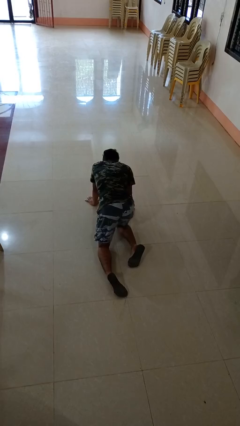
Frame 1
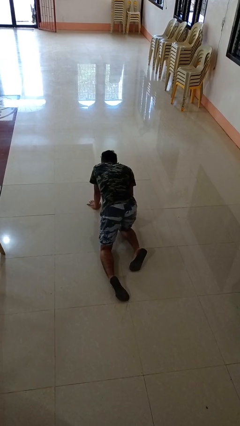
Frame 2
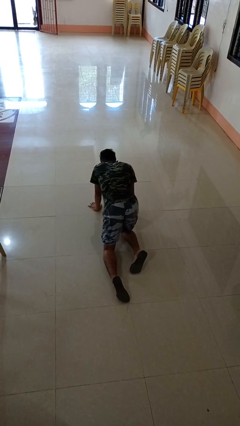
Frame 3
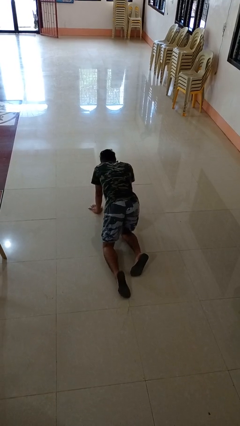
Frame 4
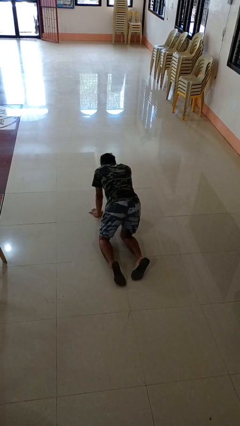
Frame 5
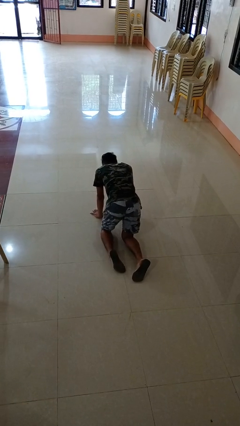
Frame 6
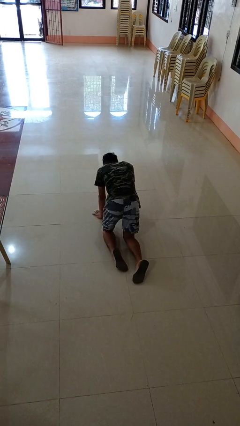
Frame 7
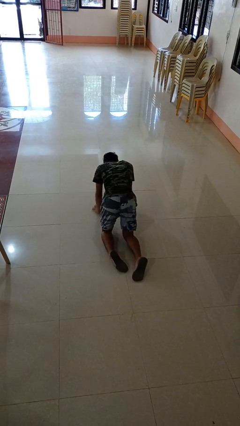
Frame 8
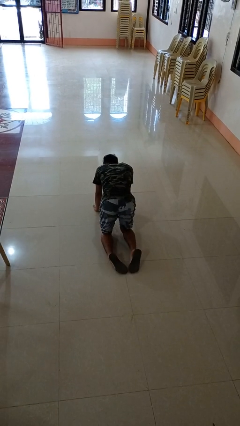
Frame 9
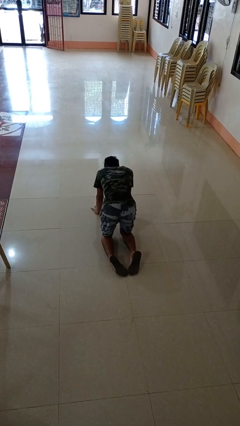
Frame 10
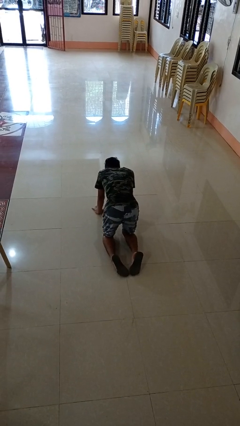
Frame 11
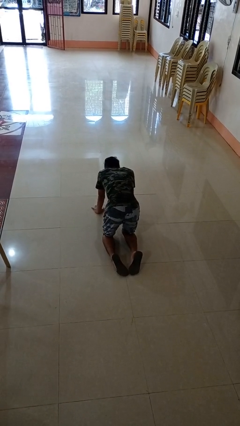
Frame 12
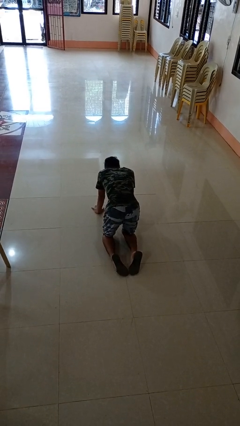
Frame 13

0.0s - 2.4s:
person crawls

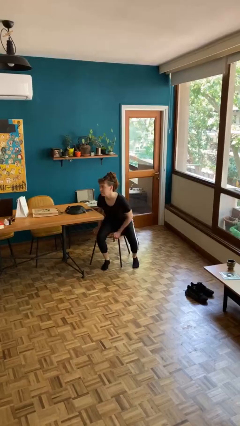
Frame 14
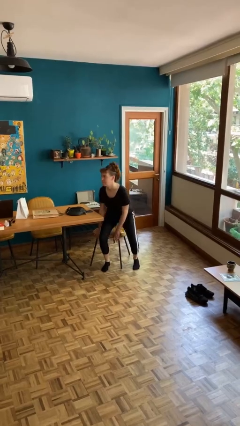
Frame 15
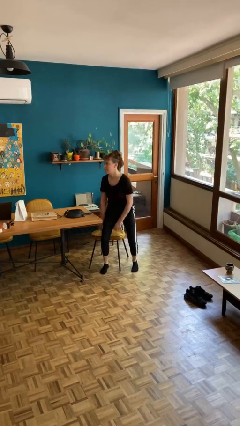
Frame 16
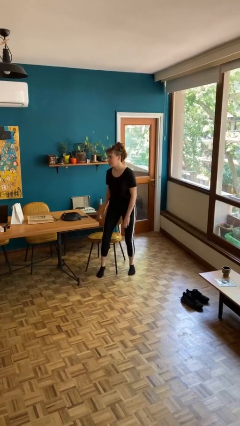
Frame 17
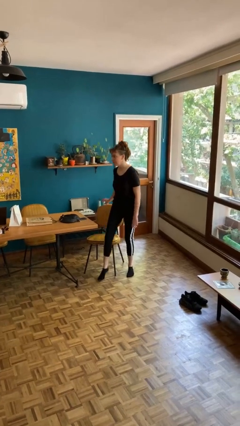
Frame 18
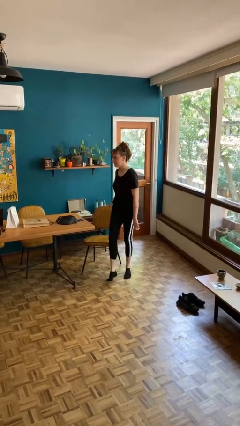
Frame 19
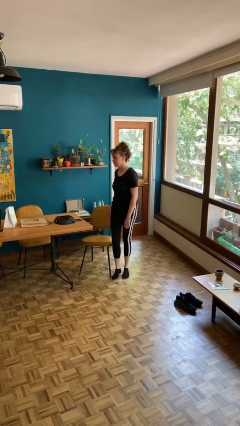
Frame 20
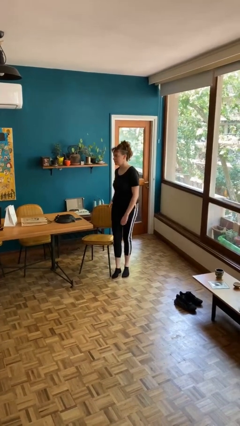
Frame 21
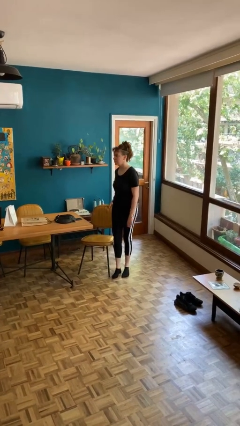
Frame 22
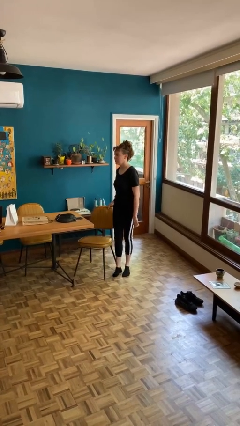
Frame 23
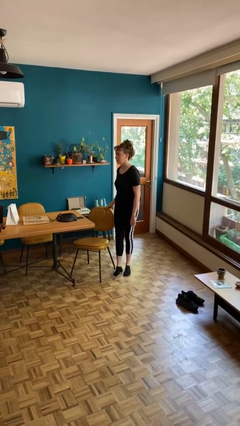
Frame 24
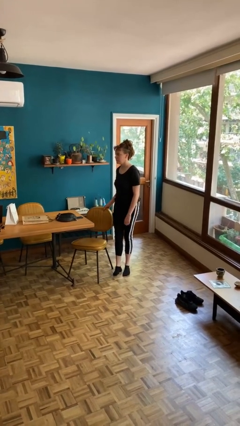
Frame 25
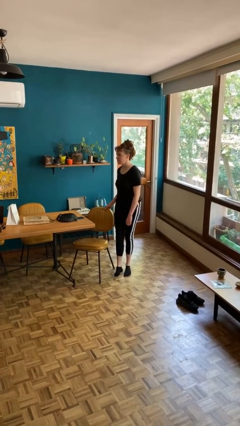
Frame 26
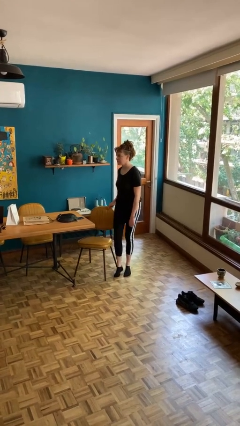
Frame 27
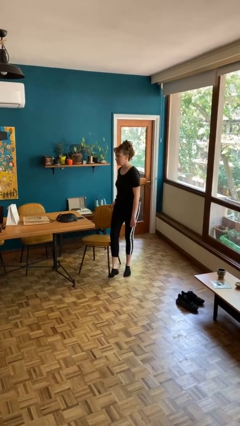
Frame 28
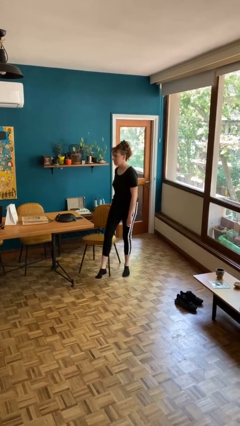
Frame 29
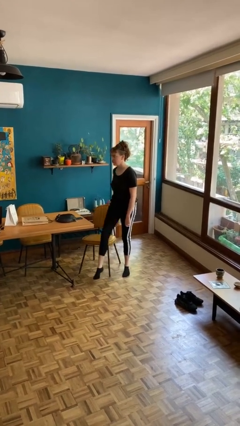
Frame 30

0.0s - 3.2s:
person stands up

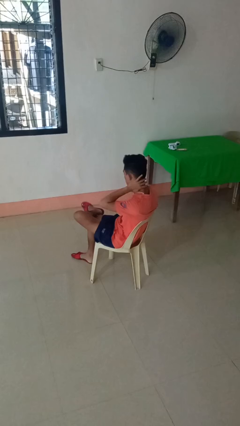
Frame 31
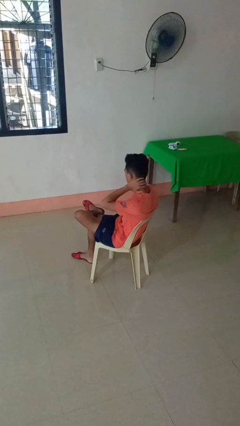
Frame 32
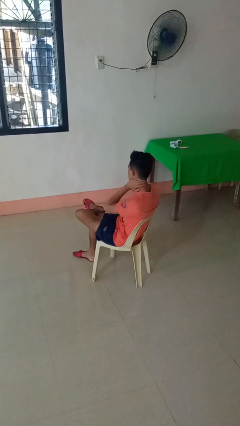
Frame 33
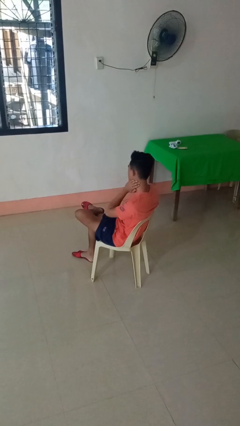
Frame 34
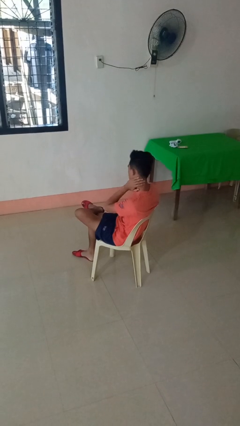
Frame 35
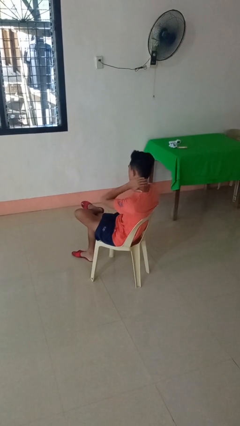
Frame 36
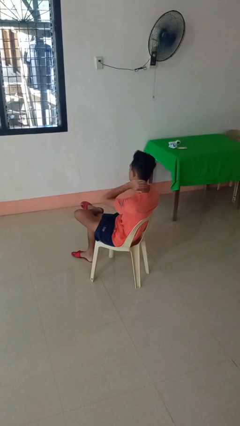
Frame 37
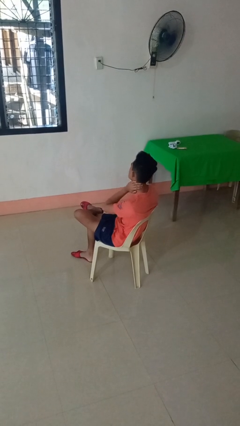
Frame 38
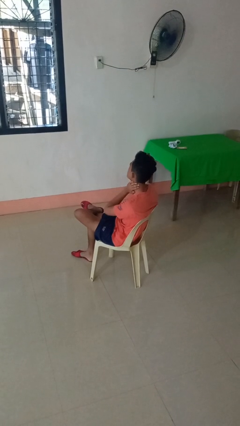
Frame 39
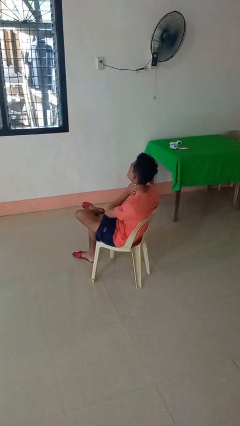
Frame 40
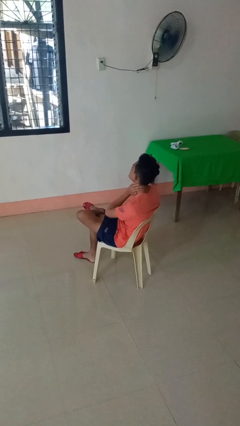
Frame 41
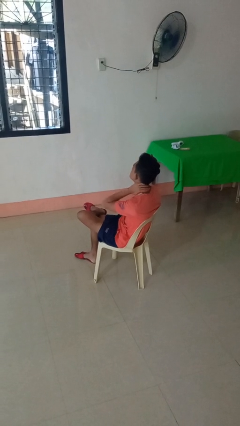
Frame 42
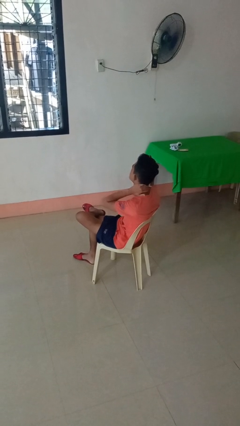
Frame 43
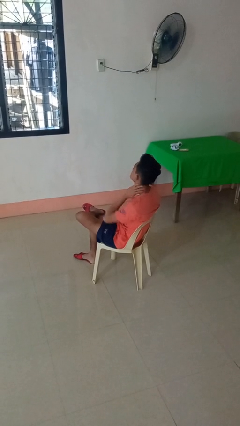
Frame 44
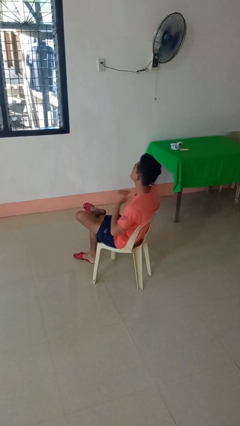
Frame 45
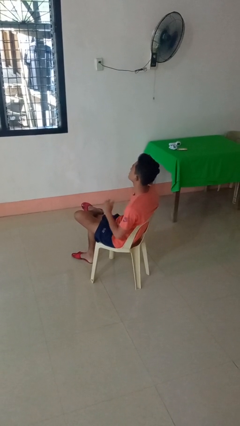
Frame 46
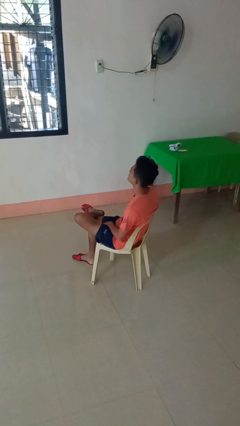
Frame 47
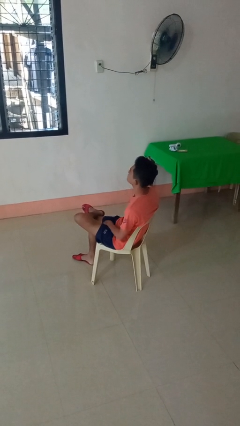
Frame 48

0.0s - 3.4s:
person rubs neck

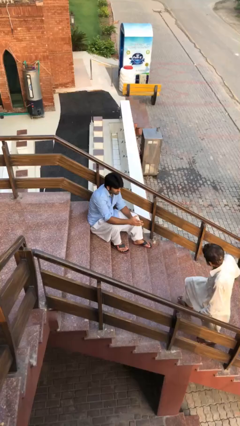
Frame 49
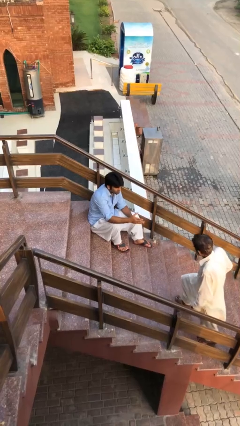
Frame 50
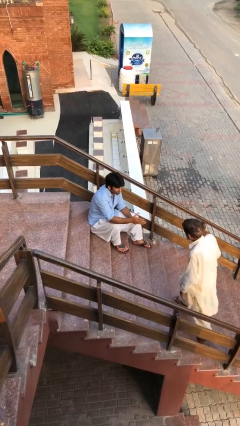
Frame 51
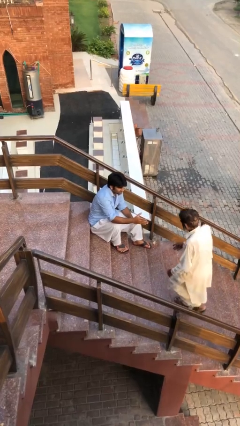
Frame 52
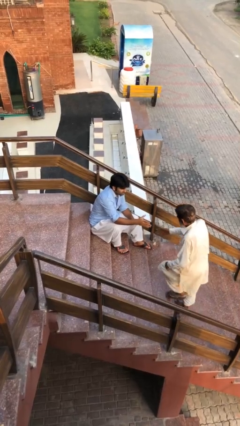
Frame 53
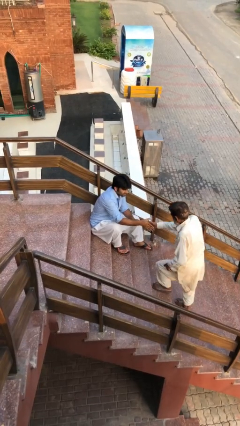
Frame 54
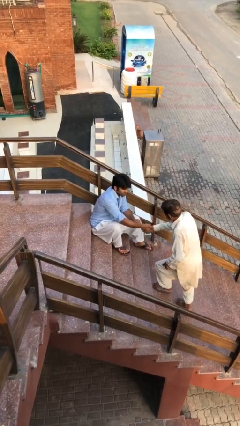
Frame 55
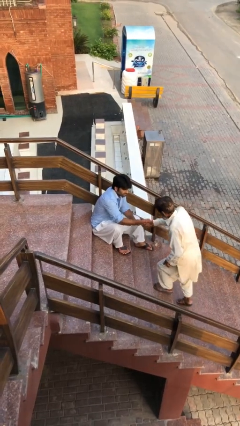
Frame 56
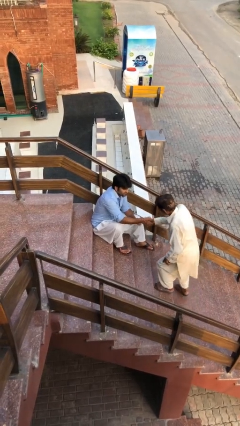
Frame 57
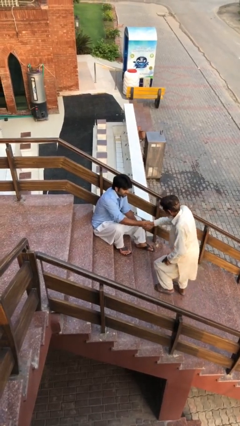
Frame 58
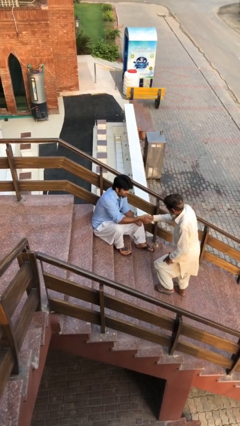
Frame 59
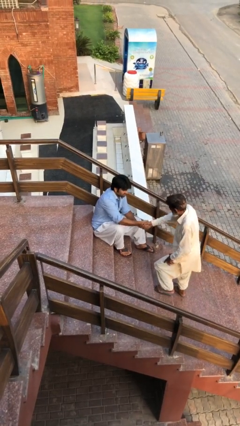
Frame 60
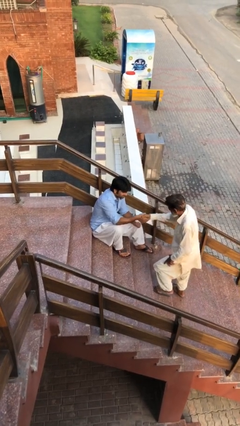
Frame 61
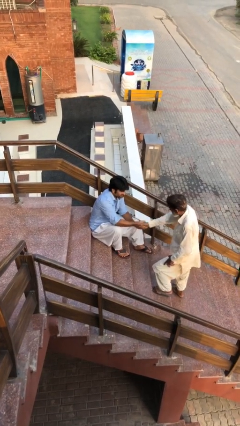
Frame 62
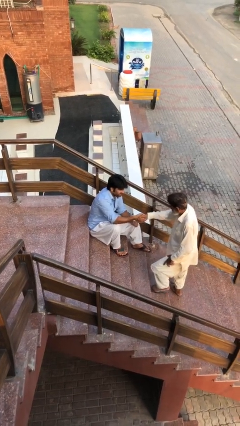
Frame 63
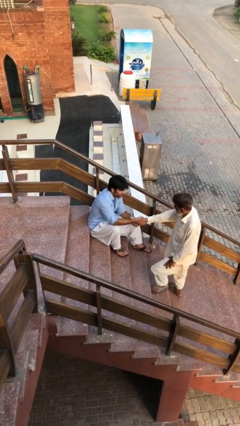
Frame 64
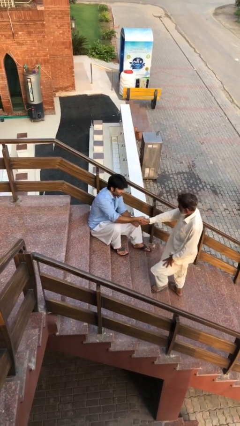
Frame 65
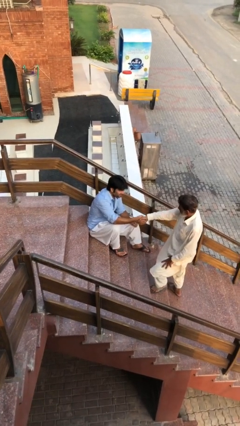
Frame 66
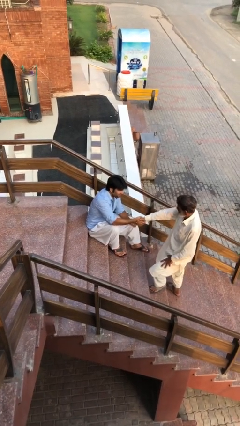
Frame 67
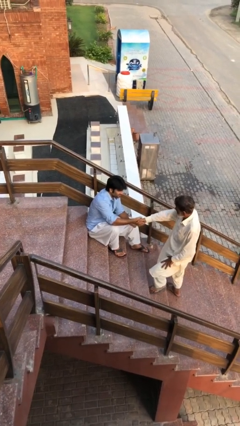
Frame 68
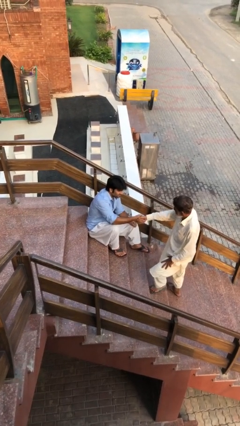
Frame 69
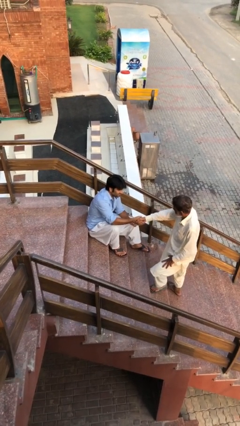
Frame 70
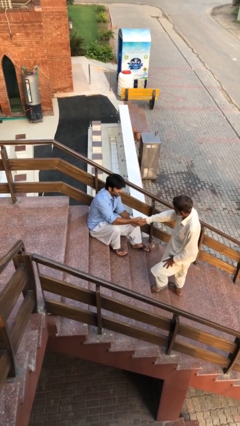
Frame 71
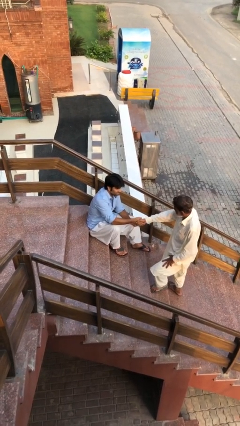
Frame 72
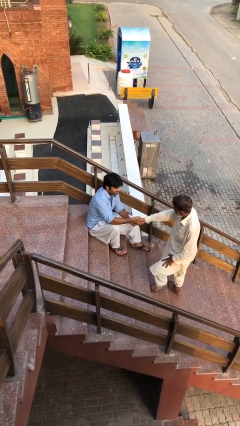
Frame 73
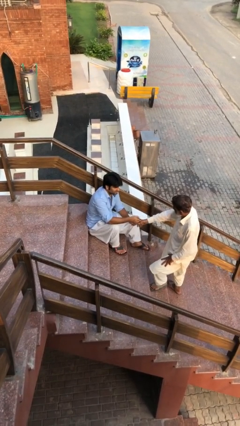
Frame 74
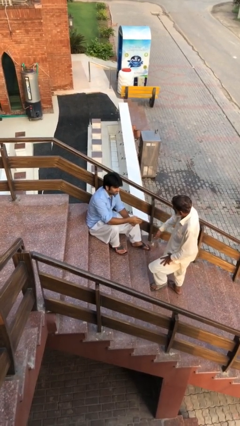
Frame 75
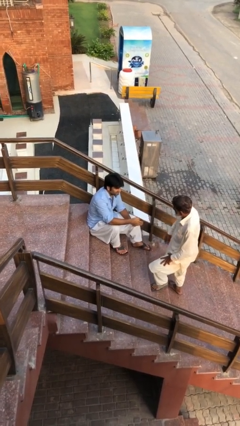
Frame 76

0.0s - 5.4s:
person shakes hand

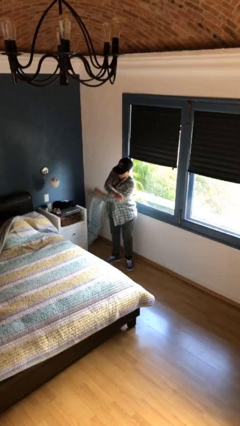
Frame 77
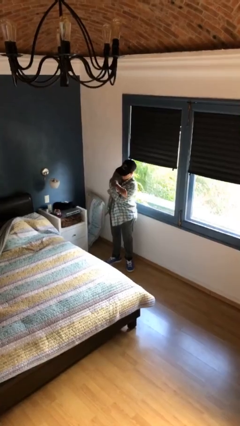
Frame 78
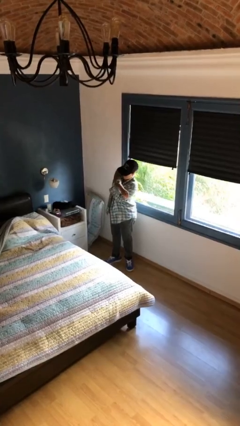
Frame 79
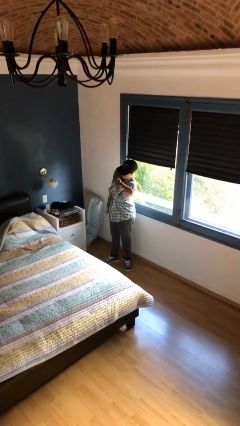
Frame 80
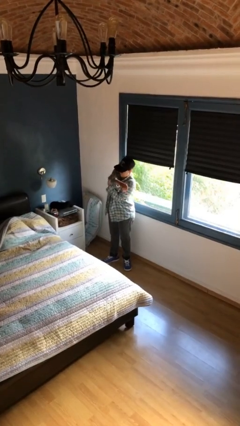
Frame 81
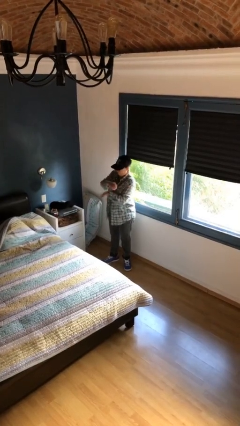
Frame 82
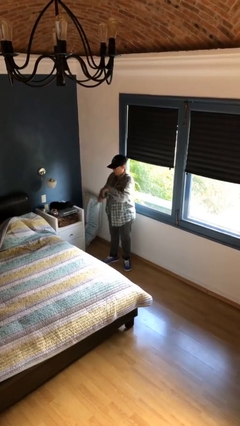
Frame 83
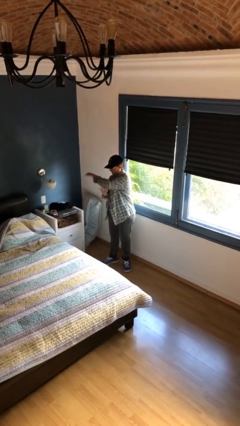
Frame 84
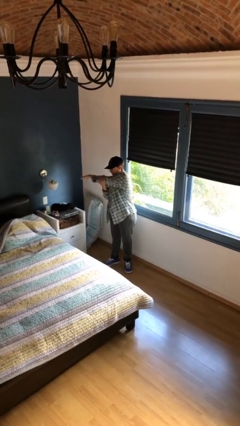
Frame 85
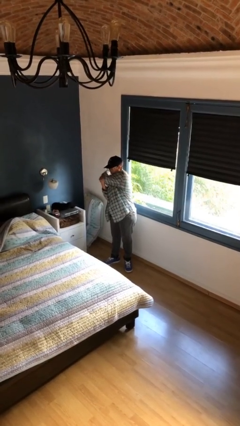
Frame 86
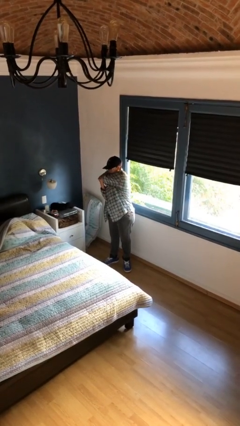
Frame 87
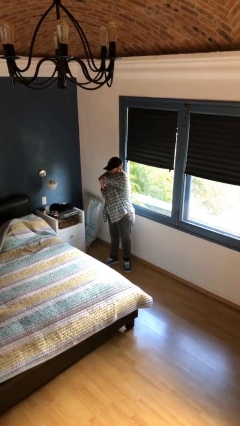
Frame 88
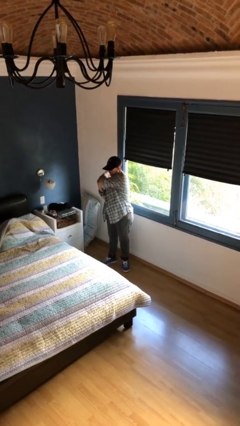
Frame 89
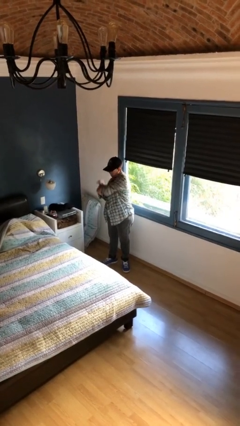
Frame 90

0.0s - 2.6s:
person stretches arms to side
